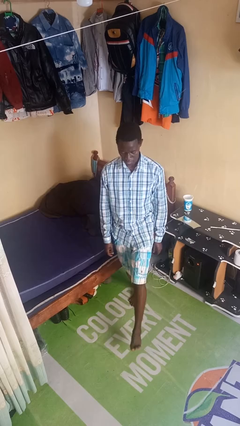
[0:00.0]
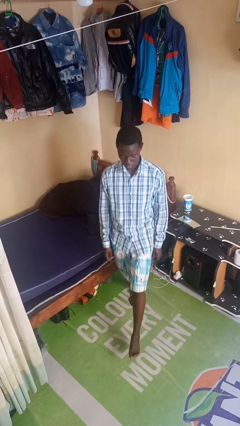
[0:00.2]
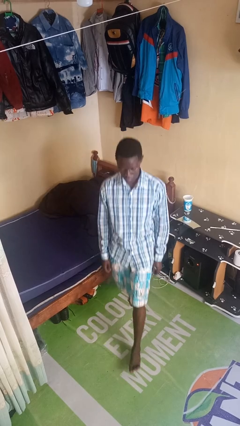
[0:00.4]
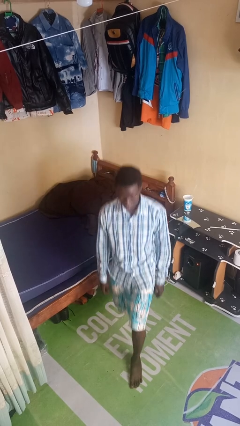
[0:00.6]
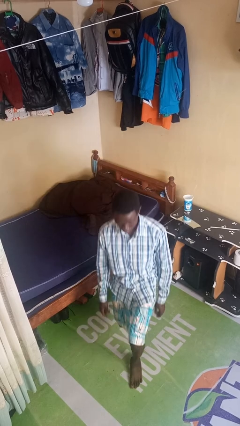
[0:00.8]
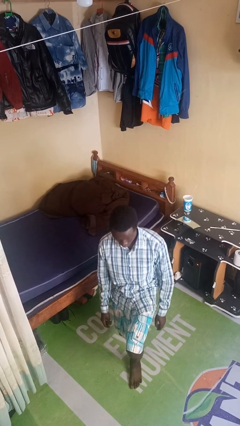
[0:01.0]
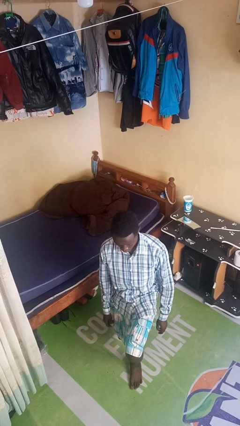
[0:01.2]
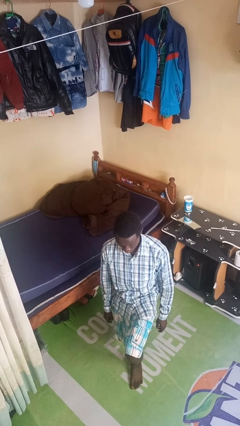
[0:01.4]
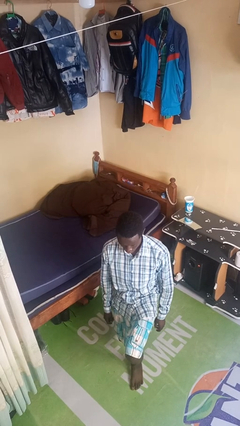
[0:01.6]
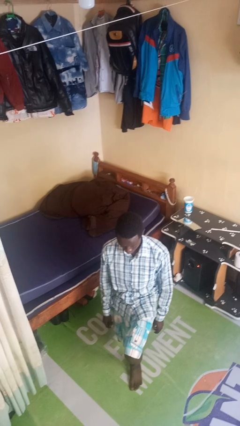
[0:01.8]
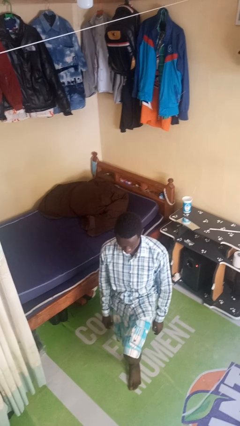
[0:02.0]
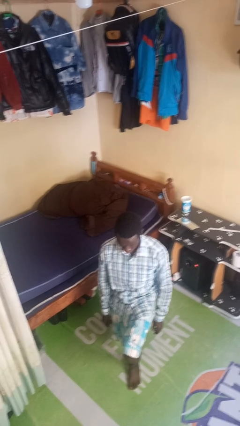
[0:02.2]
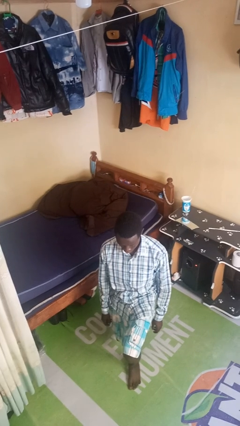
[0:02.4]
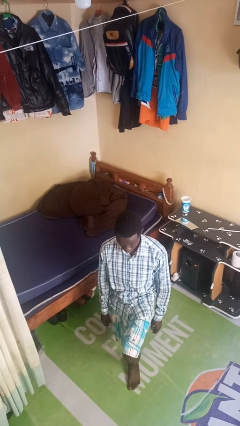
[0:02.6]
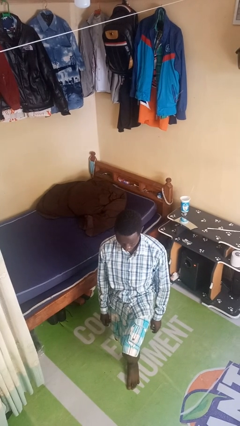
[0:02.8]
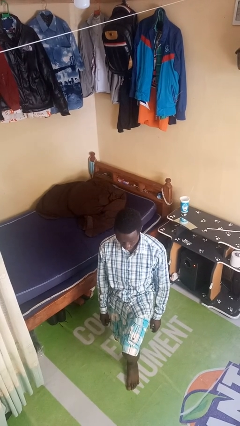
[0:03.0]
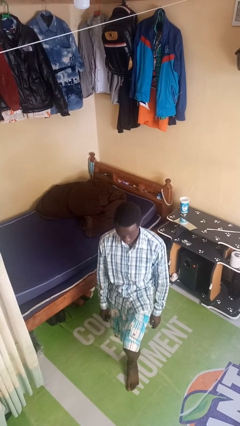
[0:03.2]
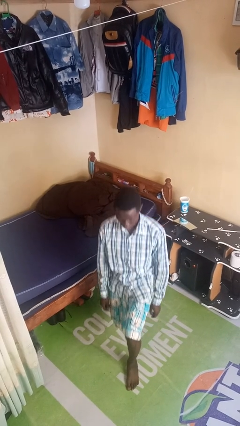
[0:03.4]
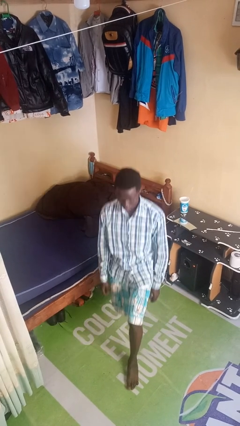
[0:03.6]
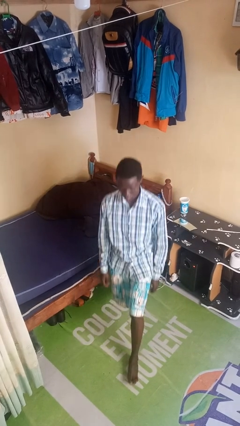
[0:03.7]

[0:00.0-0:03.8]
person exercises with lunges

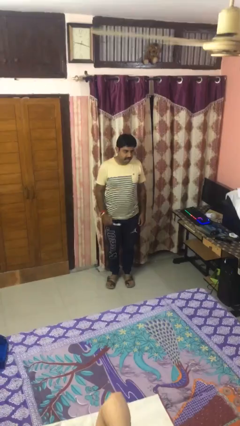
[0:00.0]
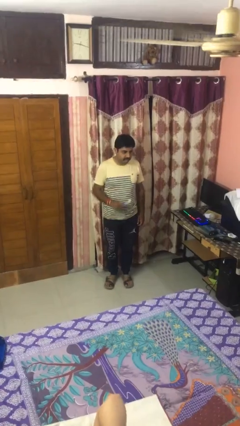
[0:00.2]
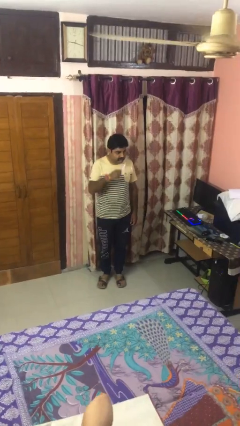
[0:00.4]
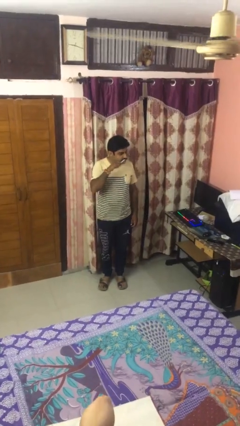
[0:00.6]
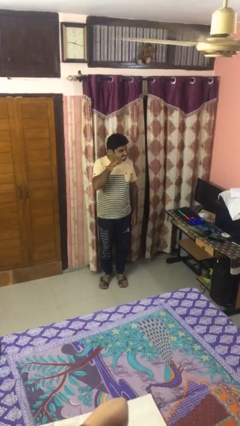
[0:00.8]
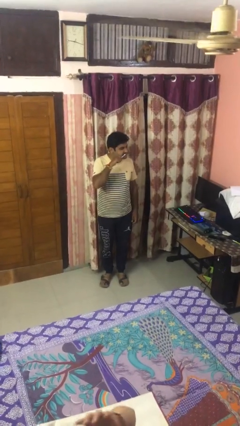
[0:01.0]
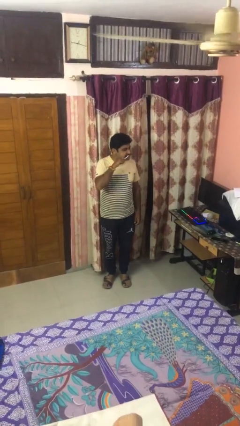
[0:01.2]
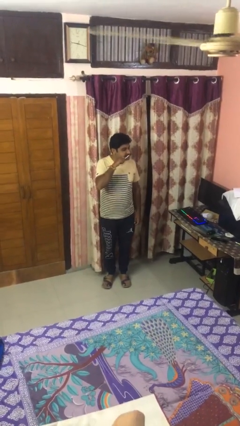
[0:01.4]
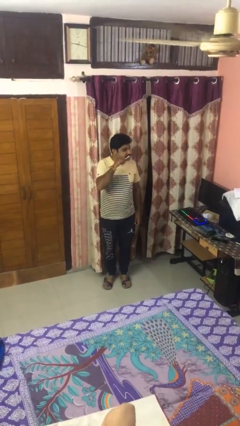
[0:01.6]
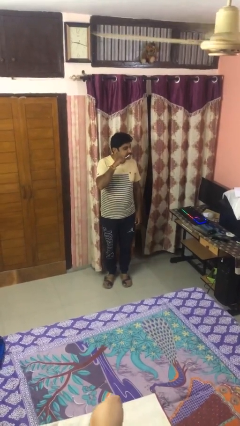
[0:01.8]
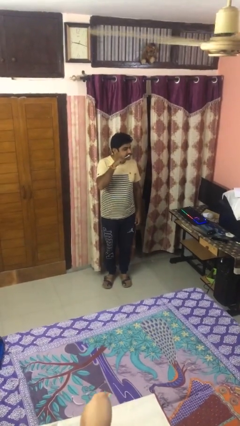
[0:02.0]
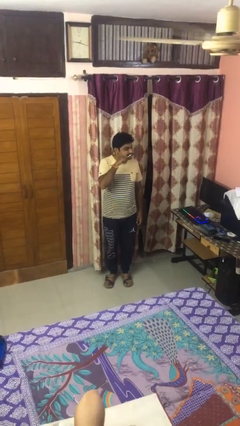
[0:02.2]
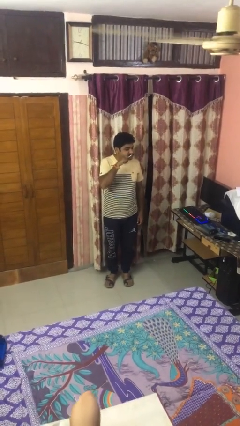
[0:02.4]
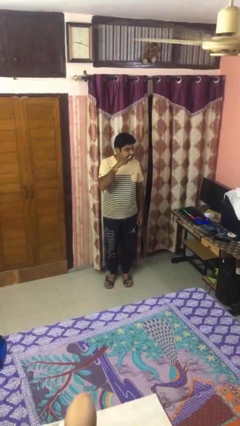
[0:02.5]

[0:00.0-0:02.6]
person brushes teeth

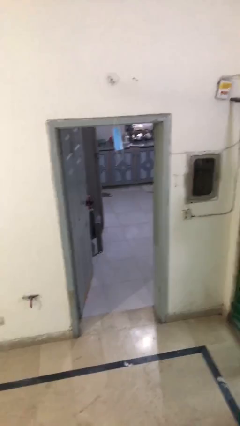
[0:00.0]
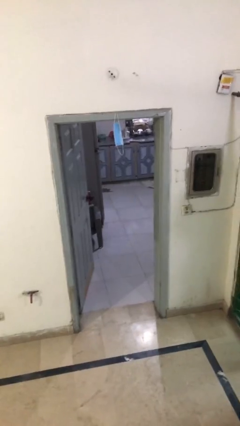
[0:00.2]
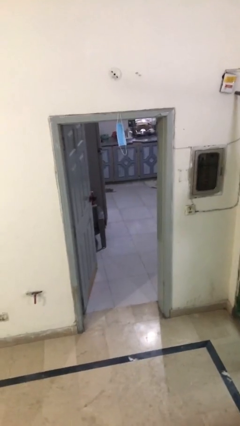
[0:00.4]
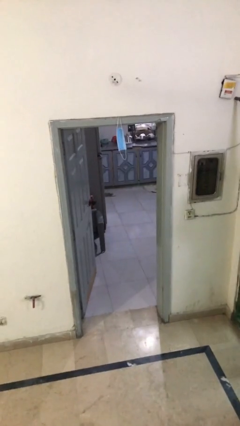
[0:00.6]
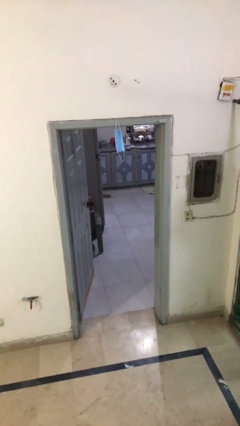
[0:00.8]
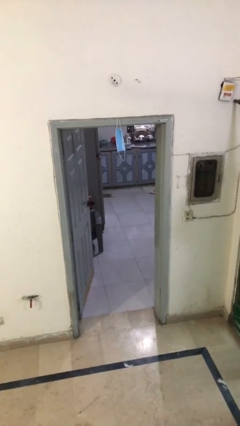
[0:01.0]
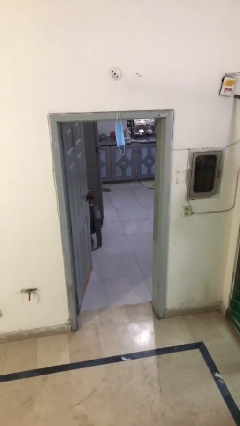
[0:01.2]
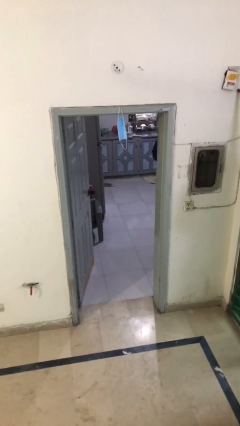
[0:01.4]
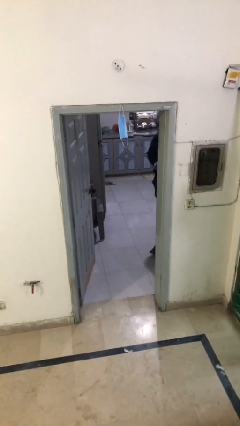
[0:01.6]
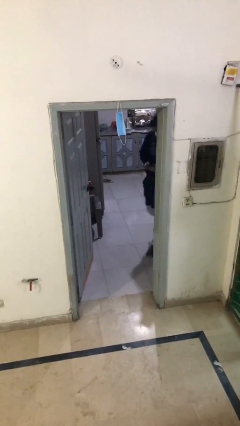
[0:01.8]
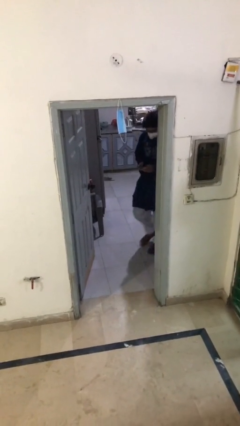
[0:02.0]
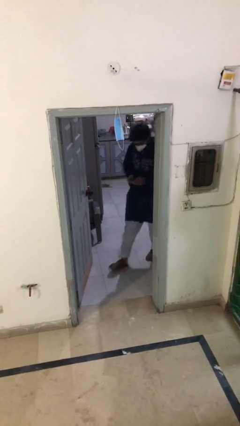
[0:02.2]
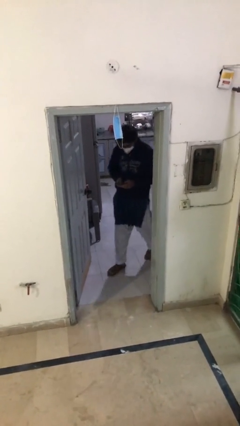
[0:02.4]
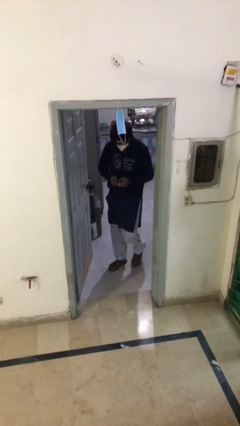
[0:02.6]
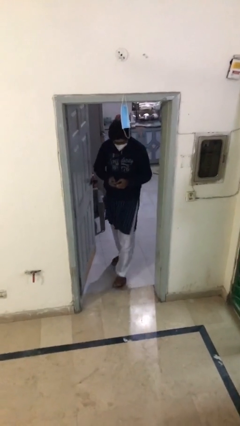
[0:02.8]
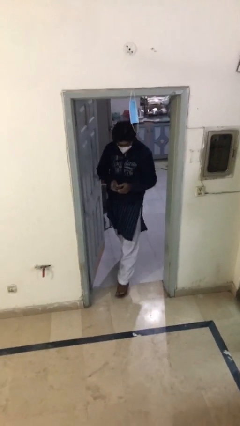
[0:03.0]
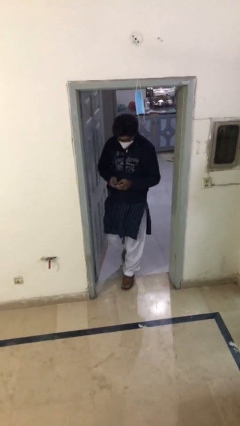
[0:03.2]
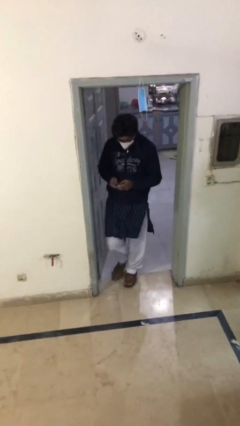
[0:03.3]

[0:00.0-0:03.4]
person enters scene through structure

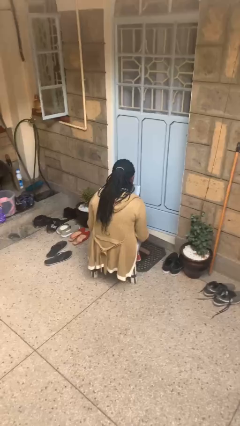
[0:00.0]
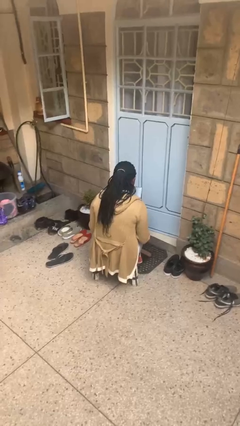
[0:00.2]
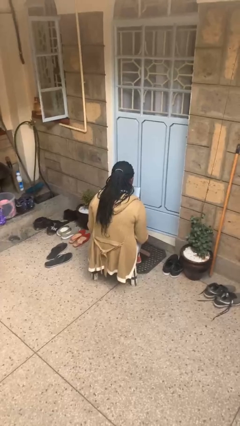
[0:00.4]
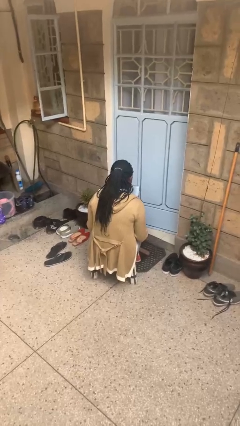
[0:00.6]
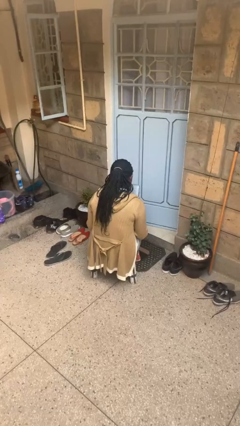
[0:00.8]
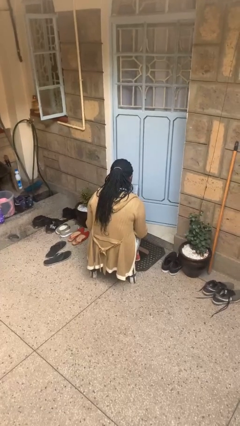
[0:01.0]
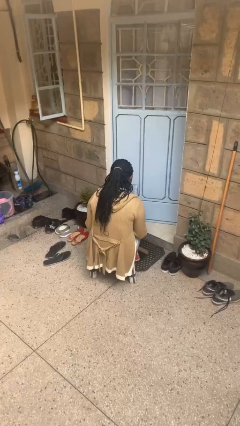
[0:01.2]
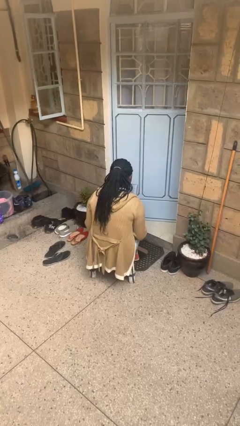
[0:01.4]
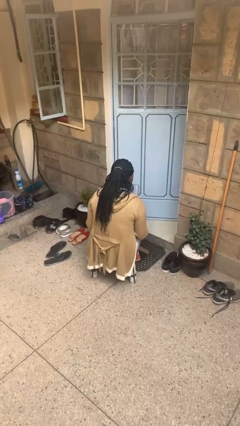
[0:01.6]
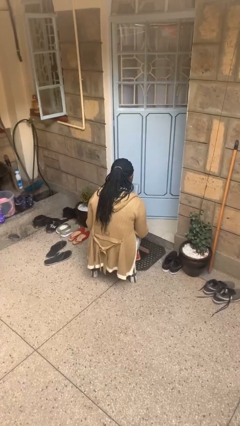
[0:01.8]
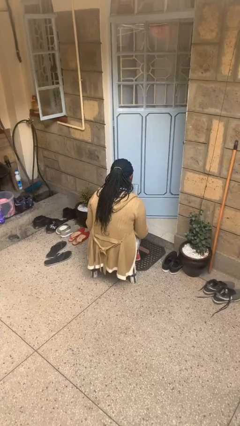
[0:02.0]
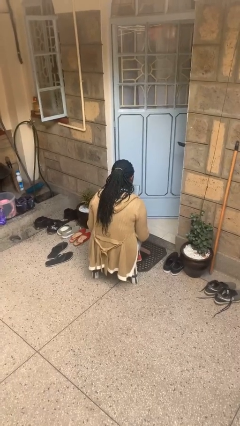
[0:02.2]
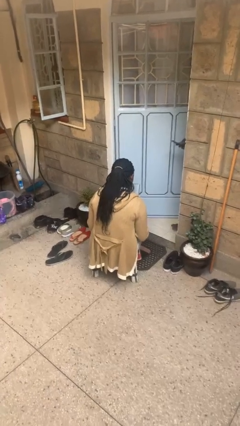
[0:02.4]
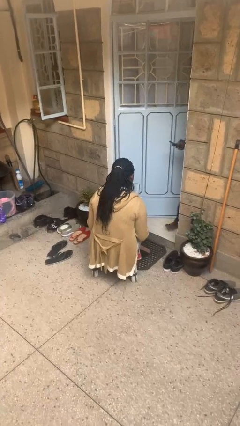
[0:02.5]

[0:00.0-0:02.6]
person interacts with tablet

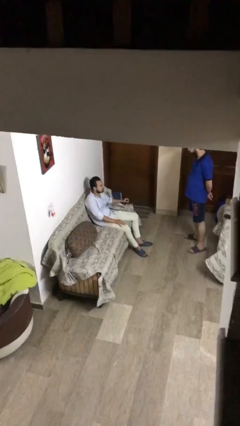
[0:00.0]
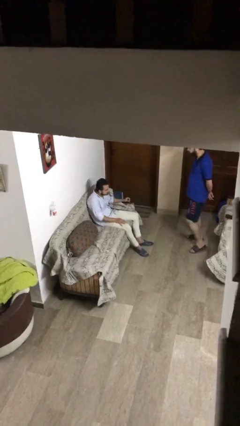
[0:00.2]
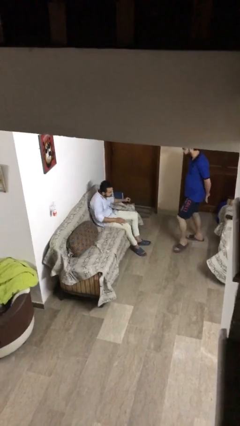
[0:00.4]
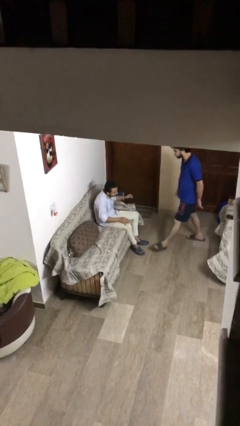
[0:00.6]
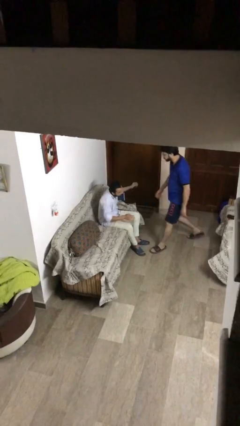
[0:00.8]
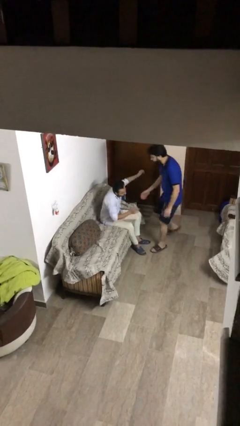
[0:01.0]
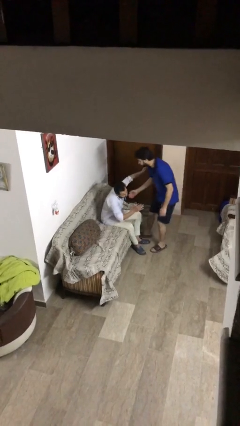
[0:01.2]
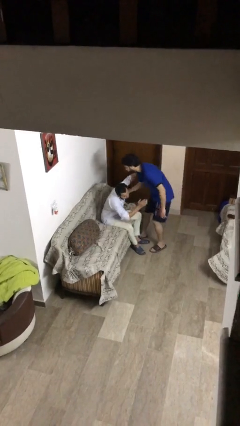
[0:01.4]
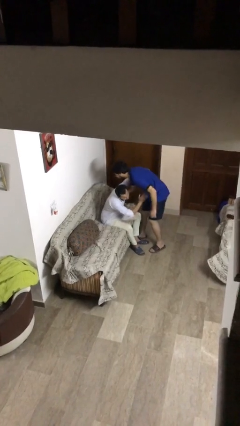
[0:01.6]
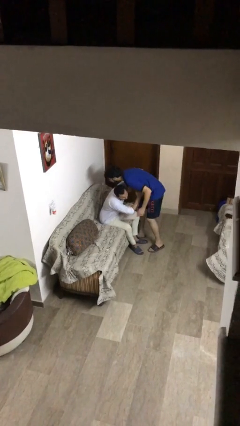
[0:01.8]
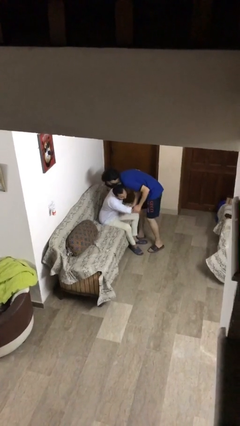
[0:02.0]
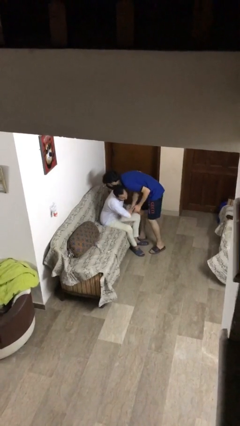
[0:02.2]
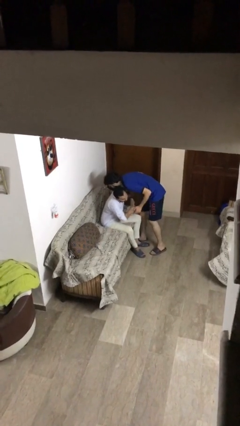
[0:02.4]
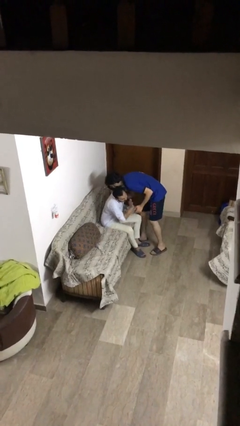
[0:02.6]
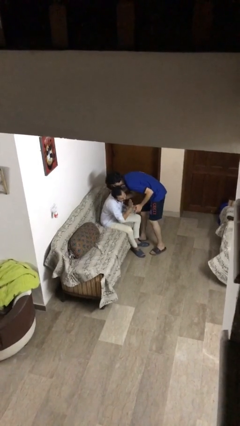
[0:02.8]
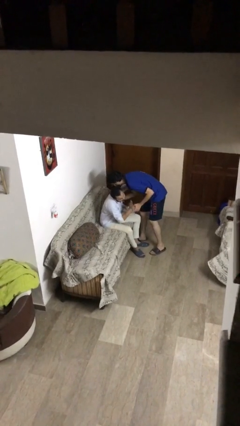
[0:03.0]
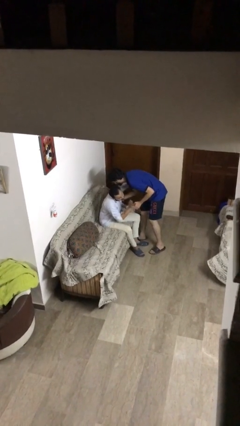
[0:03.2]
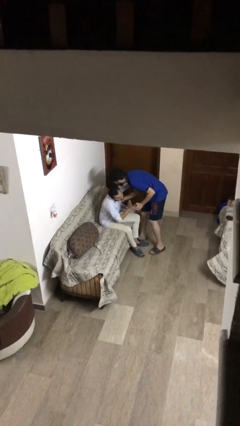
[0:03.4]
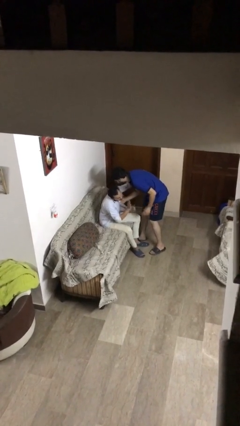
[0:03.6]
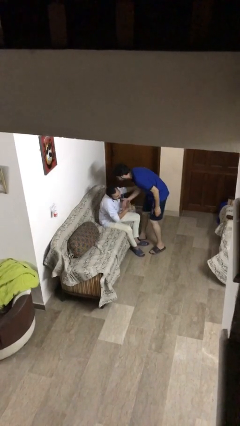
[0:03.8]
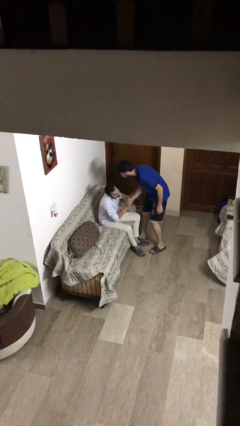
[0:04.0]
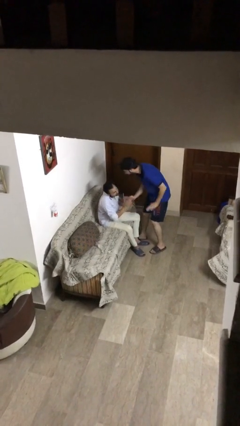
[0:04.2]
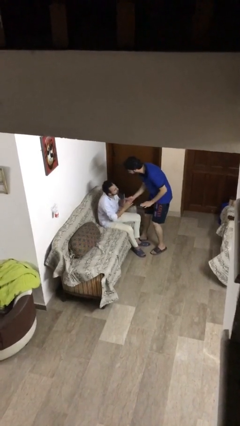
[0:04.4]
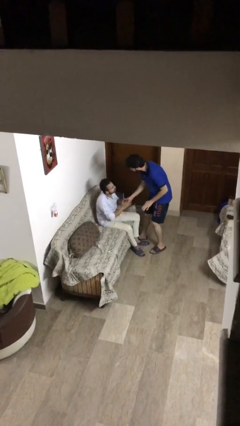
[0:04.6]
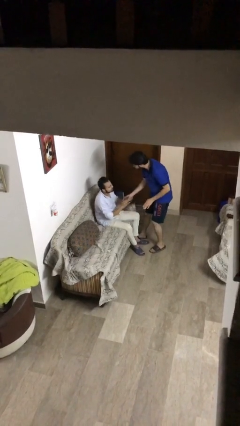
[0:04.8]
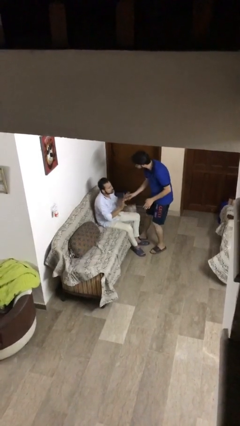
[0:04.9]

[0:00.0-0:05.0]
person embraces person
